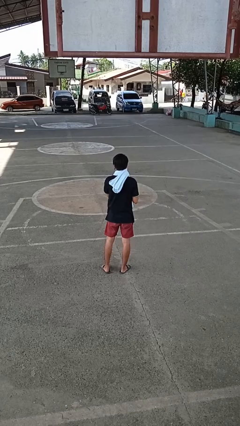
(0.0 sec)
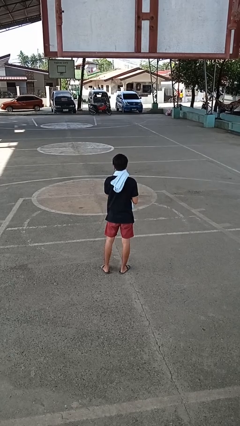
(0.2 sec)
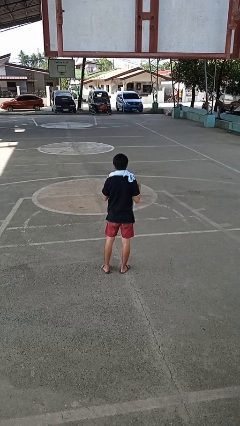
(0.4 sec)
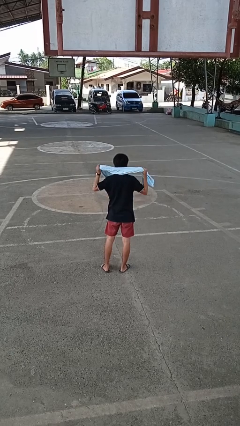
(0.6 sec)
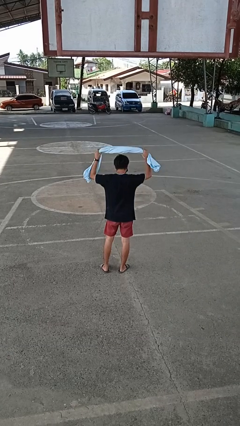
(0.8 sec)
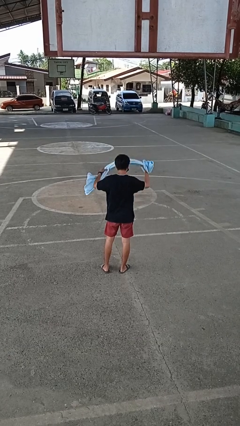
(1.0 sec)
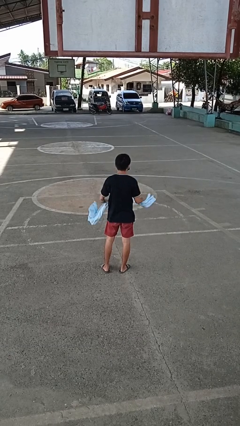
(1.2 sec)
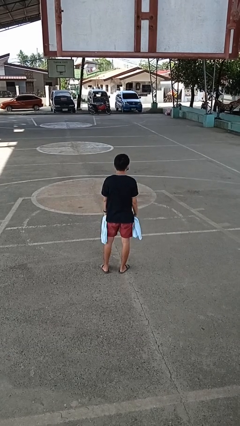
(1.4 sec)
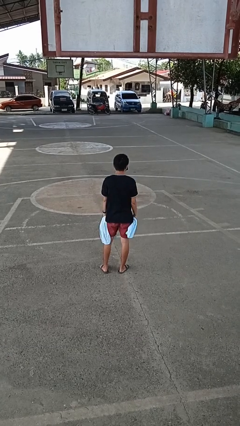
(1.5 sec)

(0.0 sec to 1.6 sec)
person takes off scarf

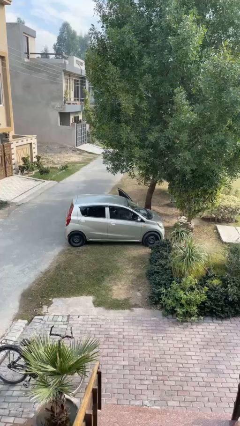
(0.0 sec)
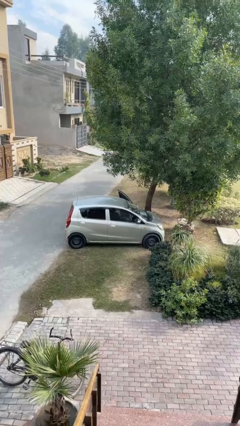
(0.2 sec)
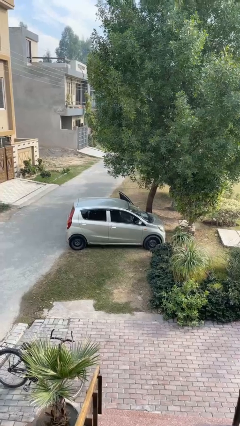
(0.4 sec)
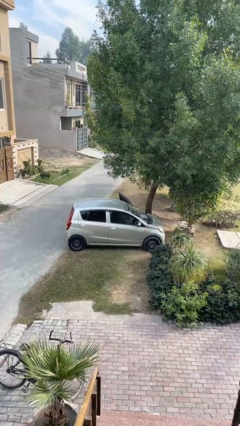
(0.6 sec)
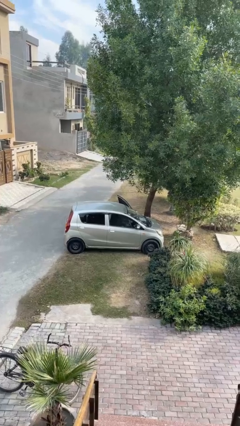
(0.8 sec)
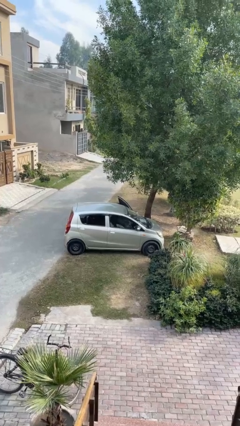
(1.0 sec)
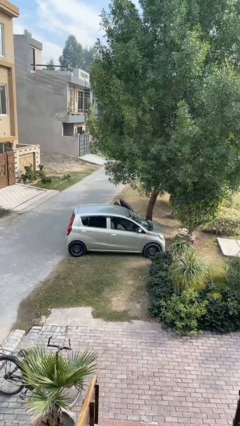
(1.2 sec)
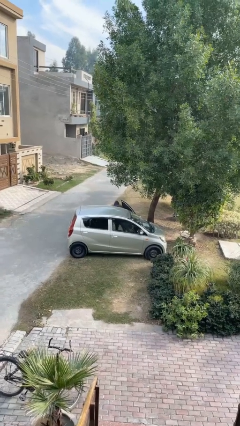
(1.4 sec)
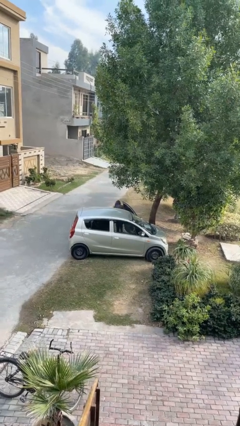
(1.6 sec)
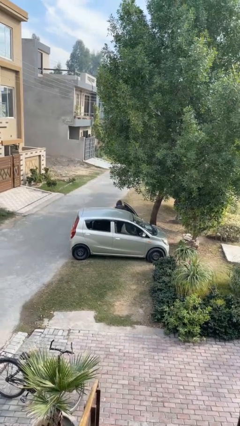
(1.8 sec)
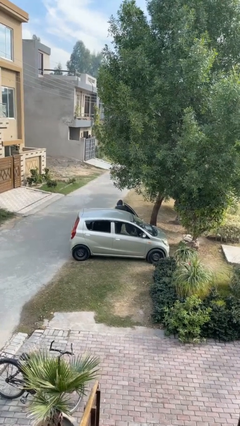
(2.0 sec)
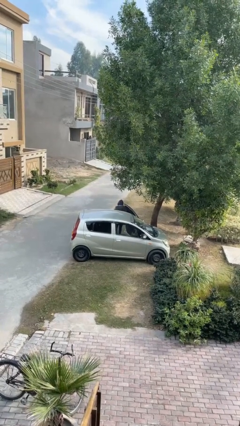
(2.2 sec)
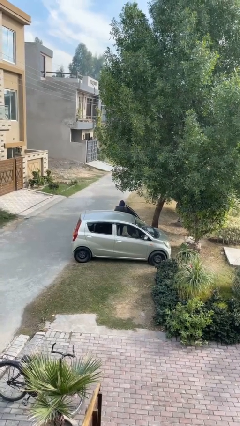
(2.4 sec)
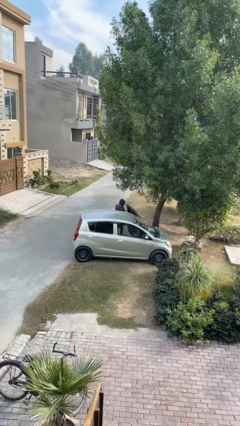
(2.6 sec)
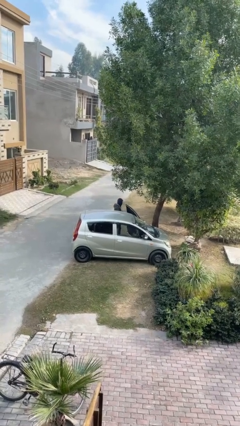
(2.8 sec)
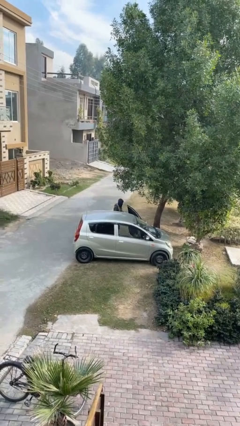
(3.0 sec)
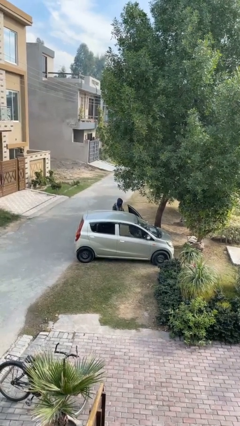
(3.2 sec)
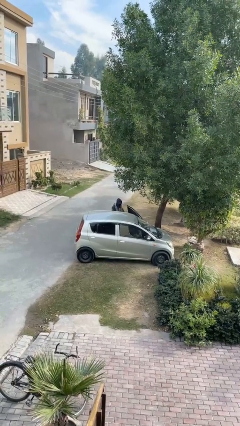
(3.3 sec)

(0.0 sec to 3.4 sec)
person exits car

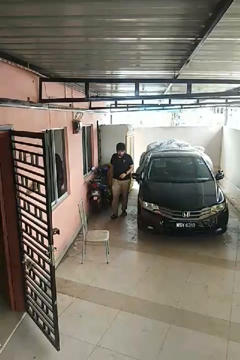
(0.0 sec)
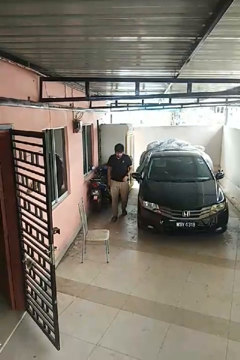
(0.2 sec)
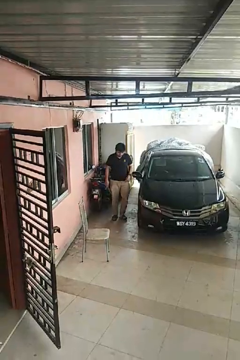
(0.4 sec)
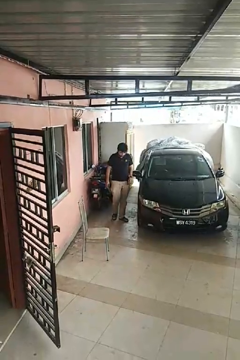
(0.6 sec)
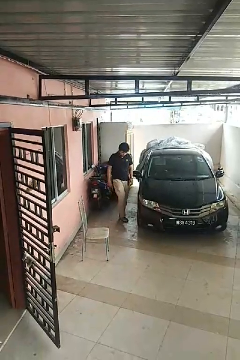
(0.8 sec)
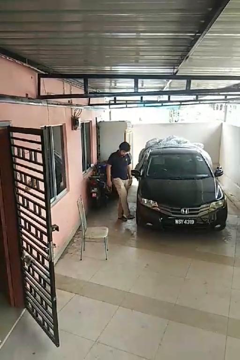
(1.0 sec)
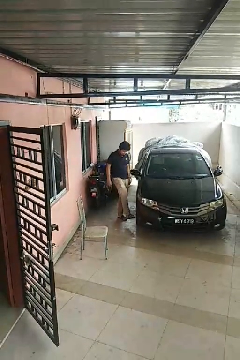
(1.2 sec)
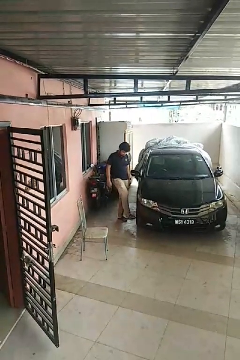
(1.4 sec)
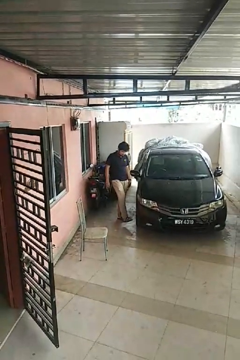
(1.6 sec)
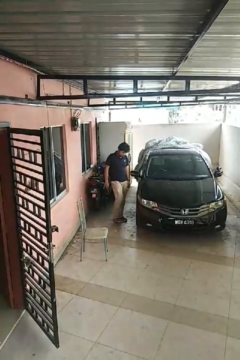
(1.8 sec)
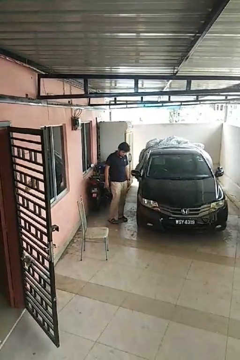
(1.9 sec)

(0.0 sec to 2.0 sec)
person kicks car tires

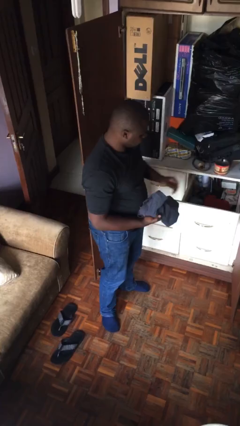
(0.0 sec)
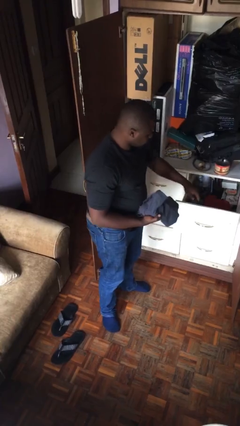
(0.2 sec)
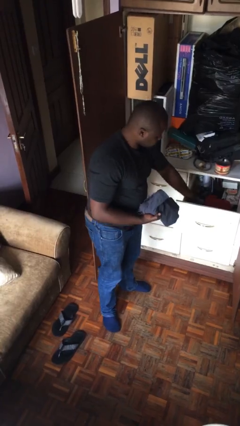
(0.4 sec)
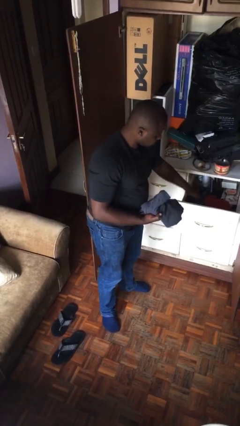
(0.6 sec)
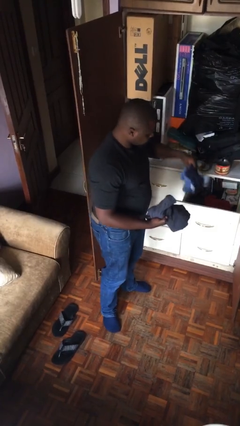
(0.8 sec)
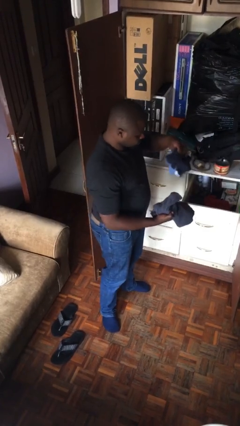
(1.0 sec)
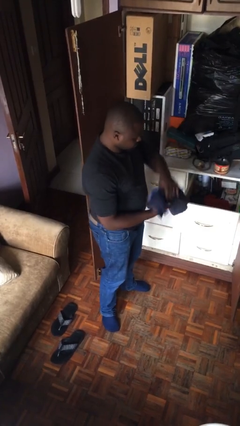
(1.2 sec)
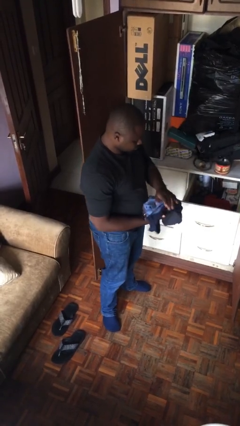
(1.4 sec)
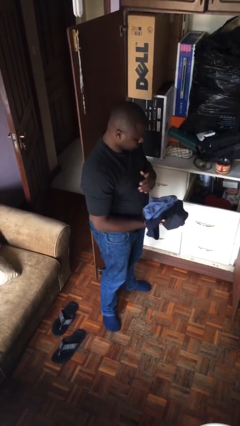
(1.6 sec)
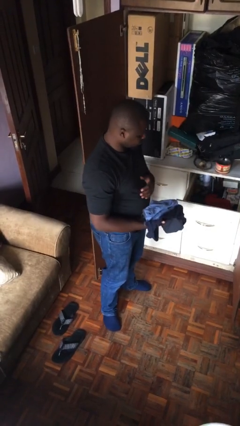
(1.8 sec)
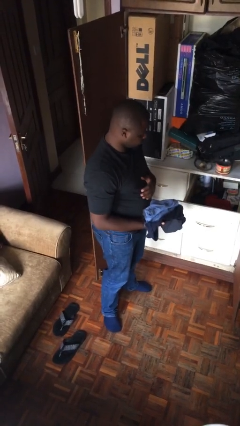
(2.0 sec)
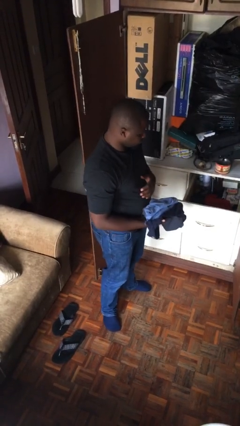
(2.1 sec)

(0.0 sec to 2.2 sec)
person takes clothes from dresser

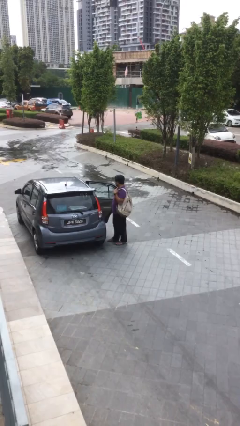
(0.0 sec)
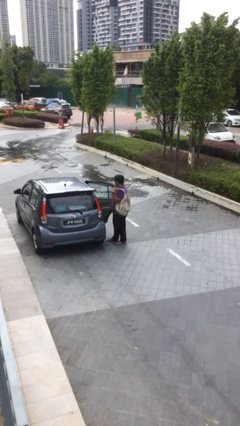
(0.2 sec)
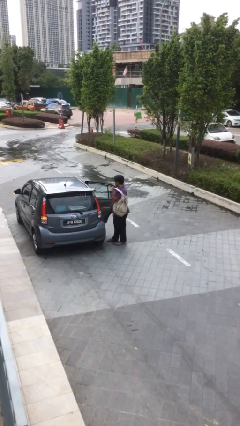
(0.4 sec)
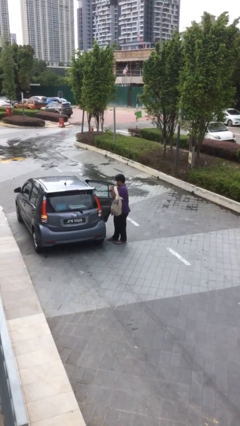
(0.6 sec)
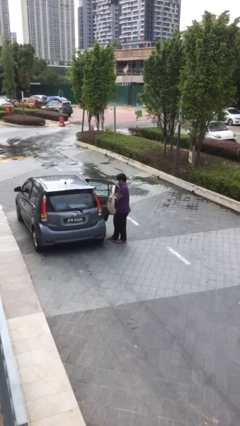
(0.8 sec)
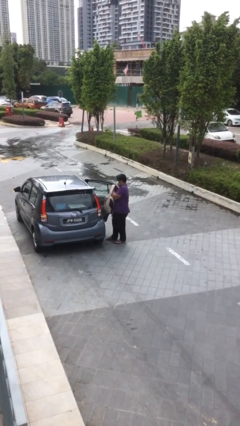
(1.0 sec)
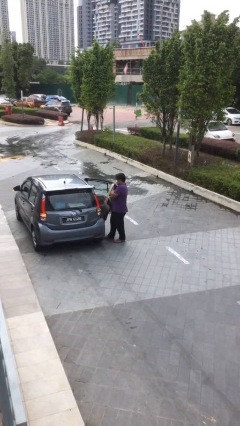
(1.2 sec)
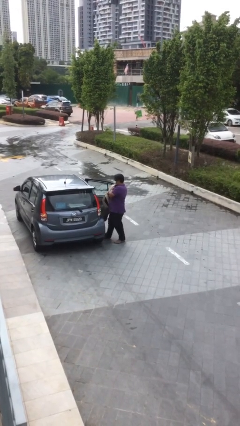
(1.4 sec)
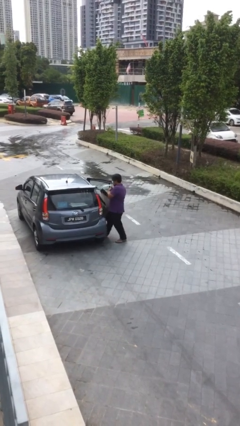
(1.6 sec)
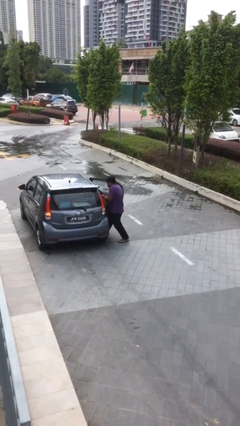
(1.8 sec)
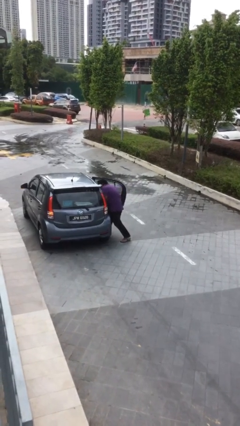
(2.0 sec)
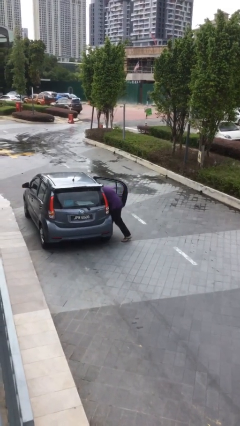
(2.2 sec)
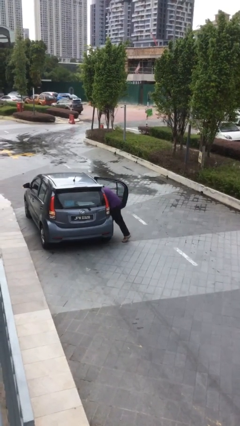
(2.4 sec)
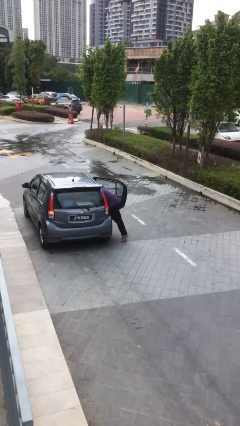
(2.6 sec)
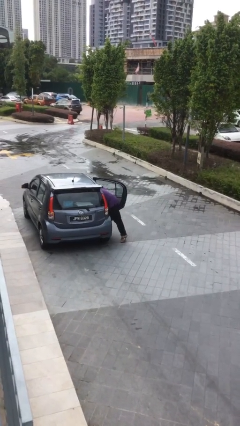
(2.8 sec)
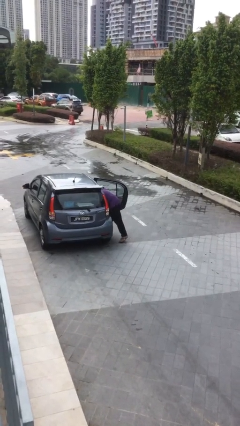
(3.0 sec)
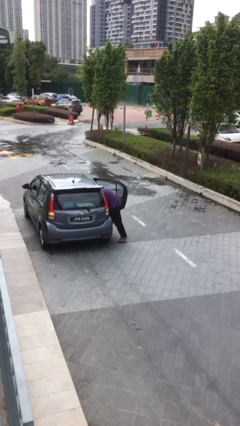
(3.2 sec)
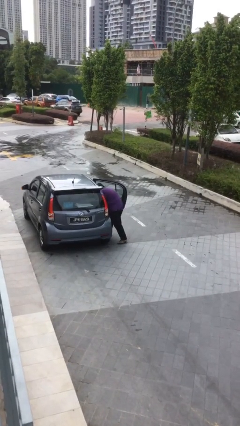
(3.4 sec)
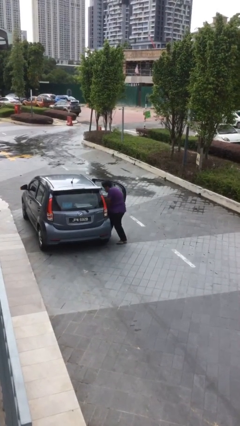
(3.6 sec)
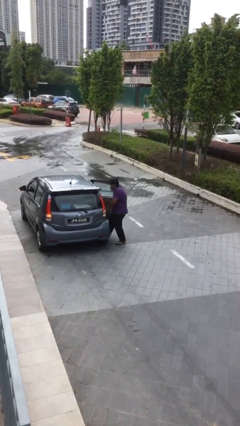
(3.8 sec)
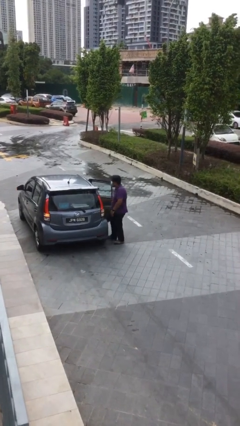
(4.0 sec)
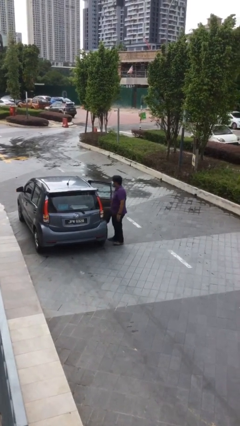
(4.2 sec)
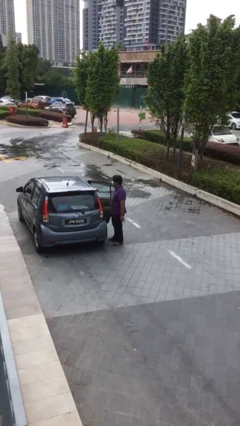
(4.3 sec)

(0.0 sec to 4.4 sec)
person loads car

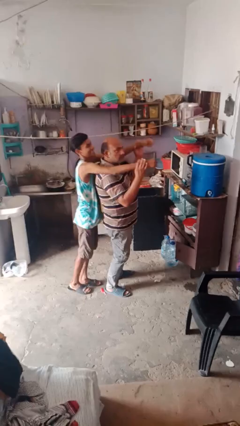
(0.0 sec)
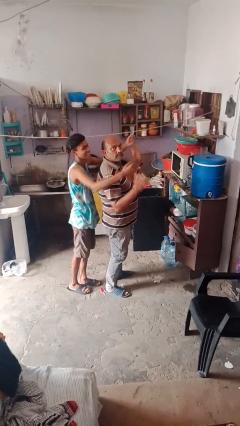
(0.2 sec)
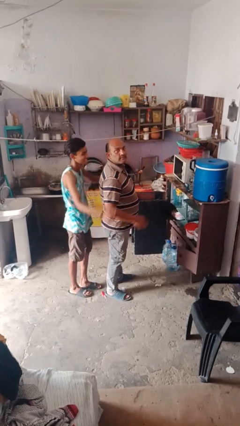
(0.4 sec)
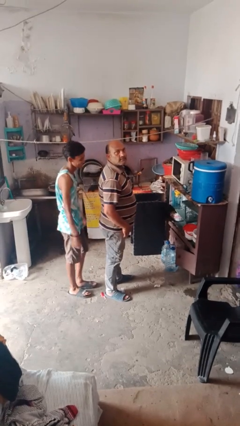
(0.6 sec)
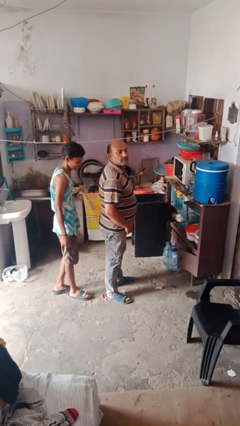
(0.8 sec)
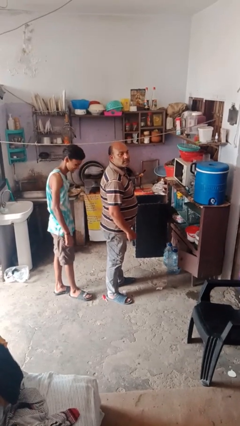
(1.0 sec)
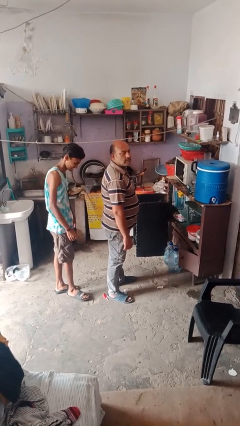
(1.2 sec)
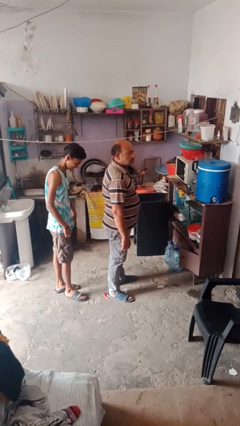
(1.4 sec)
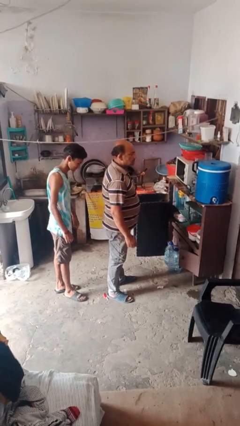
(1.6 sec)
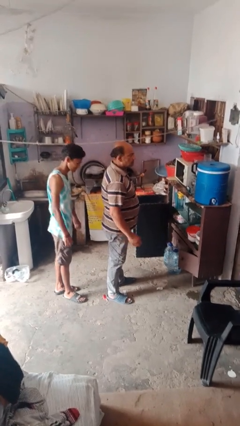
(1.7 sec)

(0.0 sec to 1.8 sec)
person puts down person

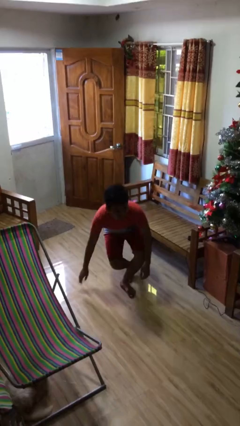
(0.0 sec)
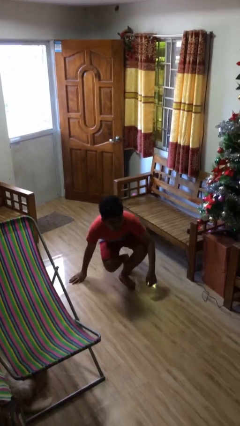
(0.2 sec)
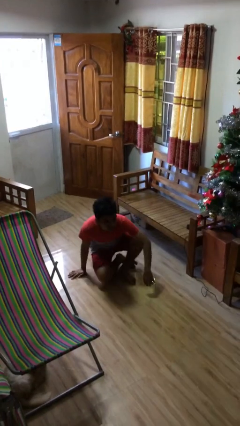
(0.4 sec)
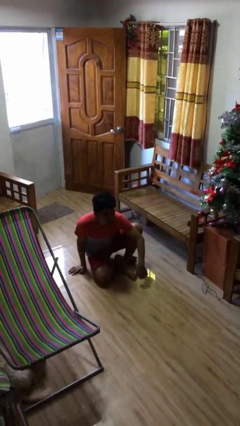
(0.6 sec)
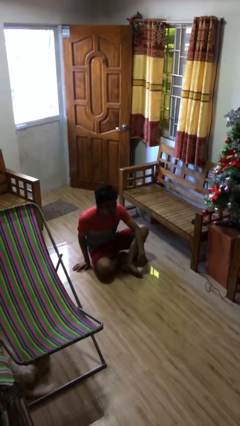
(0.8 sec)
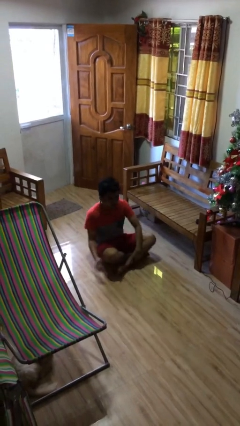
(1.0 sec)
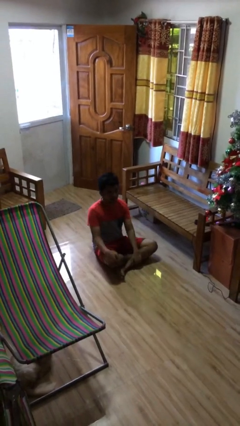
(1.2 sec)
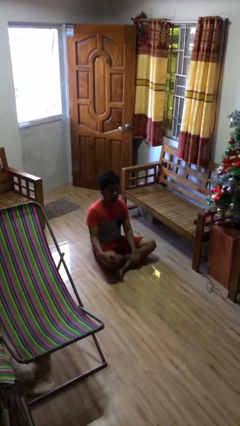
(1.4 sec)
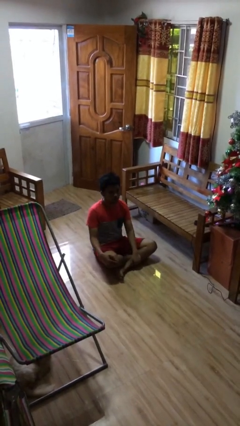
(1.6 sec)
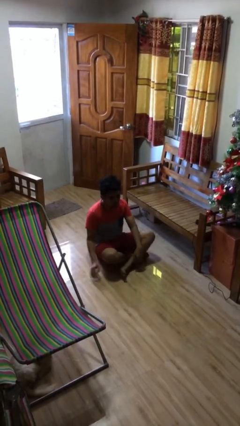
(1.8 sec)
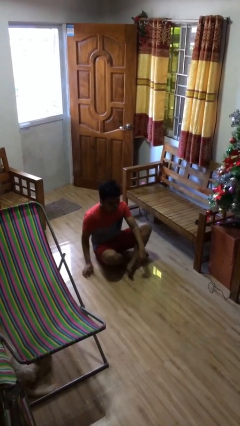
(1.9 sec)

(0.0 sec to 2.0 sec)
person sits down
